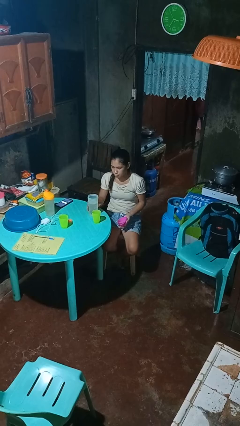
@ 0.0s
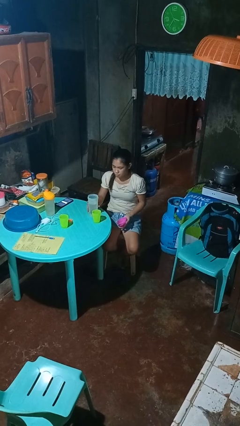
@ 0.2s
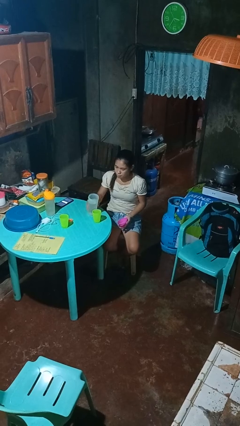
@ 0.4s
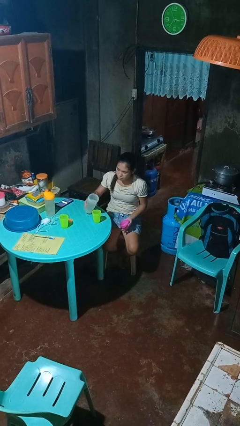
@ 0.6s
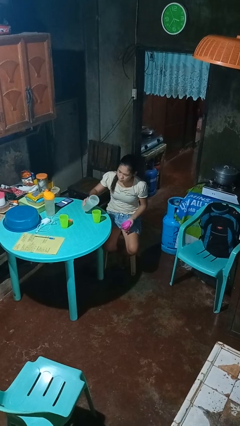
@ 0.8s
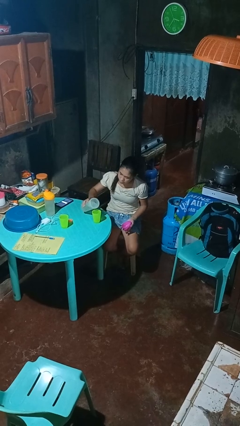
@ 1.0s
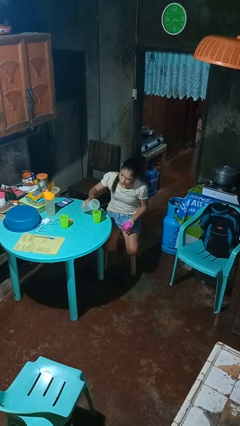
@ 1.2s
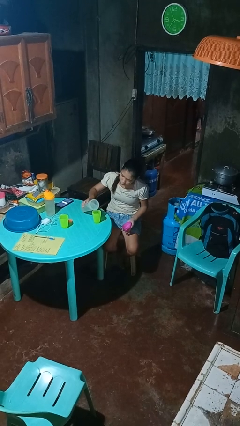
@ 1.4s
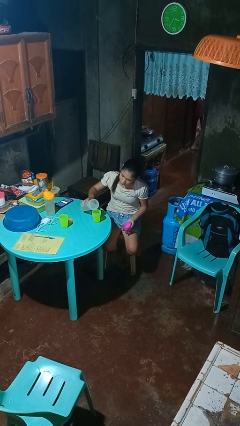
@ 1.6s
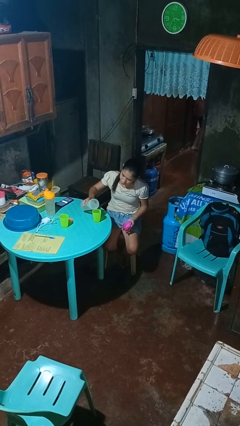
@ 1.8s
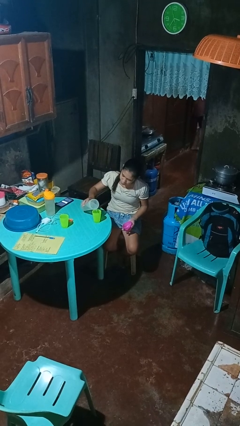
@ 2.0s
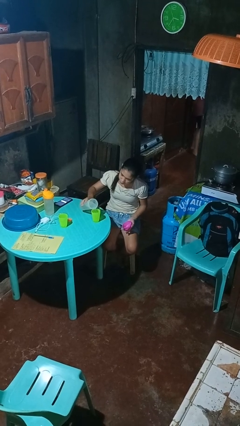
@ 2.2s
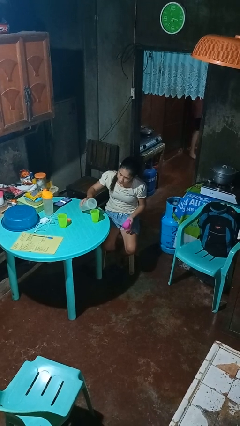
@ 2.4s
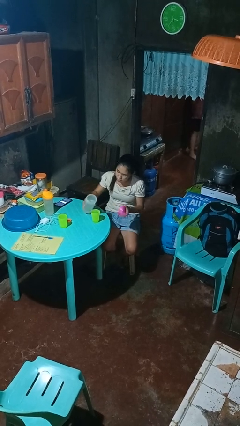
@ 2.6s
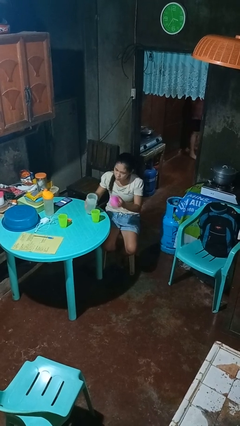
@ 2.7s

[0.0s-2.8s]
person pours liquid into cup

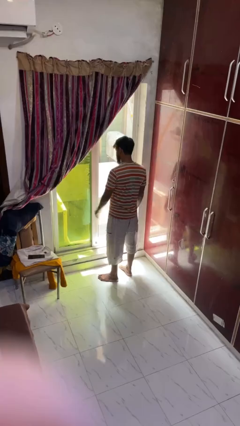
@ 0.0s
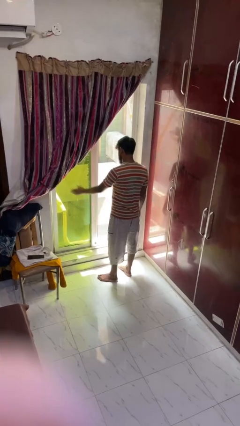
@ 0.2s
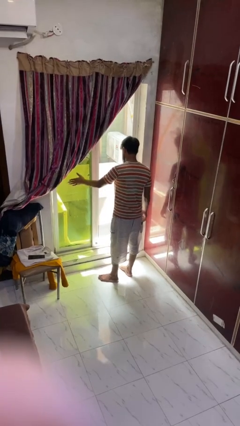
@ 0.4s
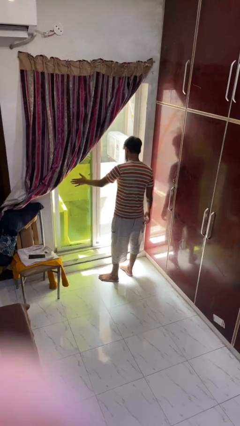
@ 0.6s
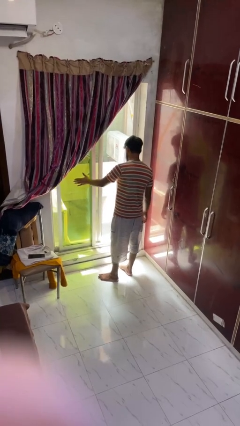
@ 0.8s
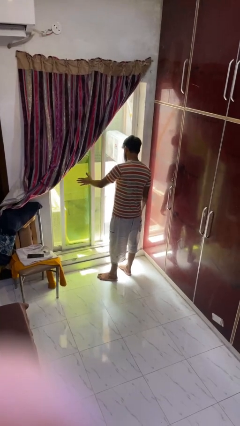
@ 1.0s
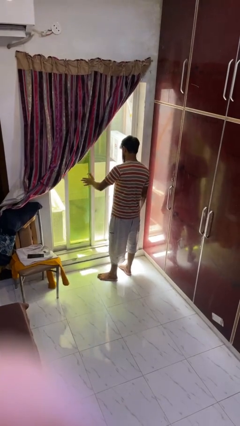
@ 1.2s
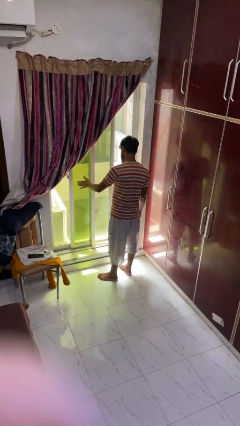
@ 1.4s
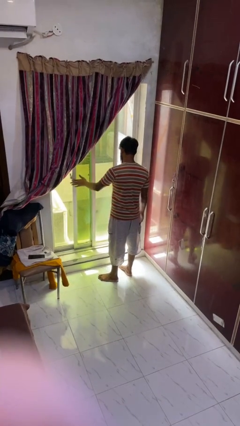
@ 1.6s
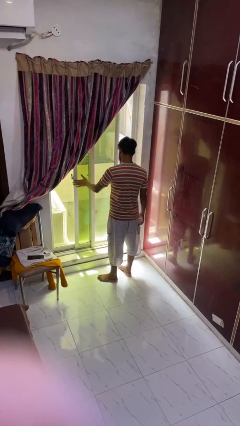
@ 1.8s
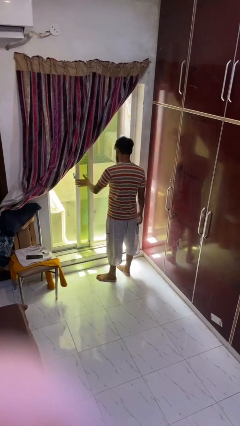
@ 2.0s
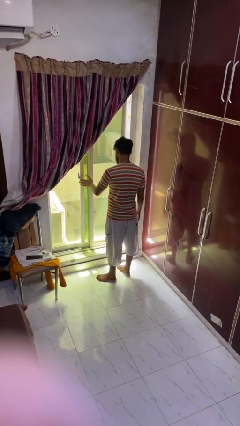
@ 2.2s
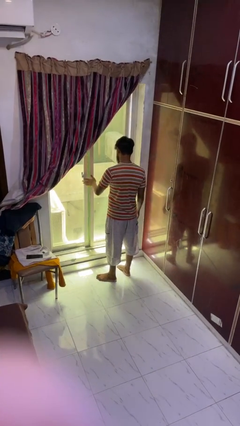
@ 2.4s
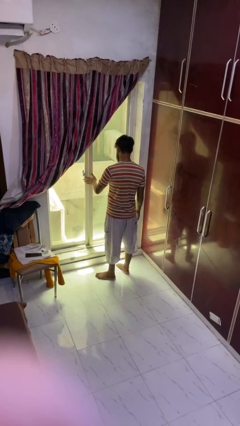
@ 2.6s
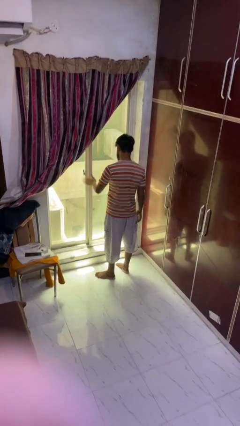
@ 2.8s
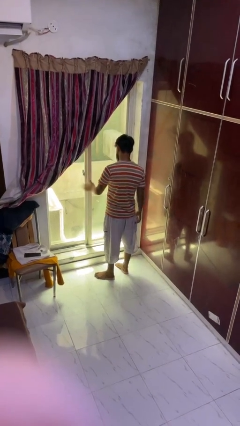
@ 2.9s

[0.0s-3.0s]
person closes home window

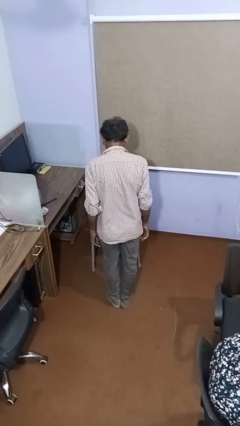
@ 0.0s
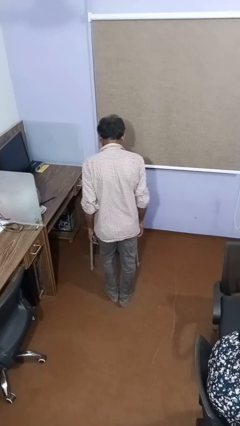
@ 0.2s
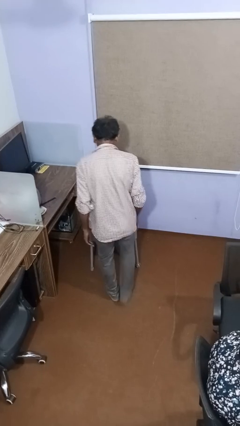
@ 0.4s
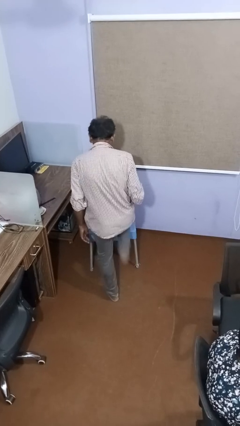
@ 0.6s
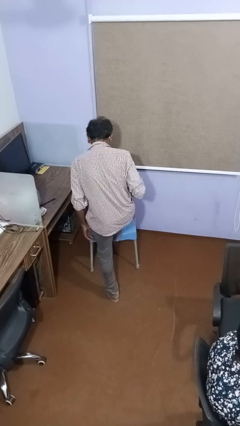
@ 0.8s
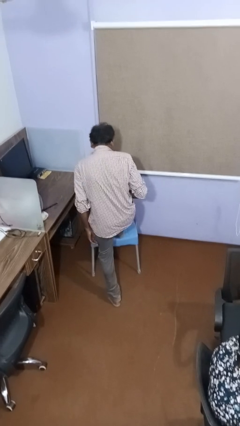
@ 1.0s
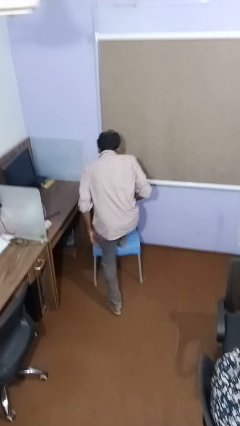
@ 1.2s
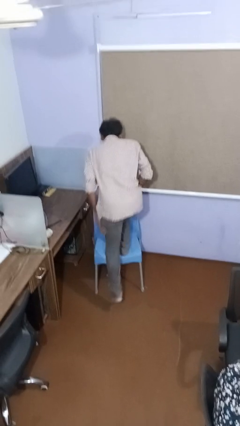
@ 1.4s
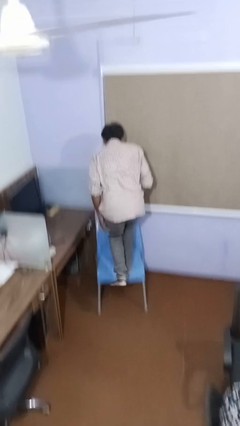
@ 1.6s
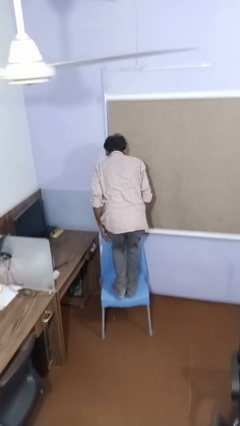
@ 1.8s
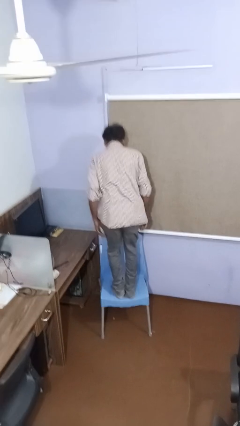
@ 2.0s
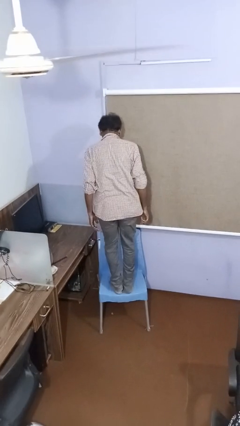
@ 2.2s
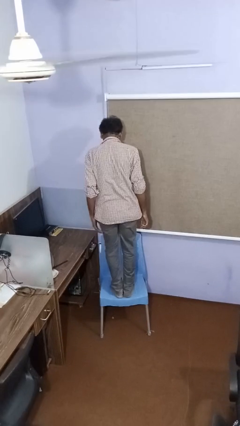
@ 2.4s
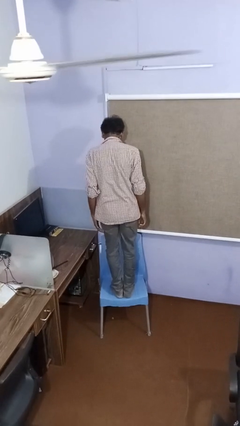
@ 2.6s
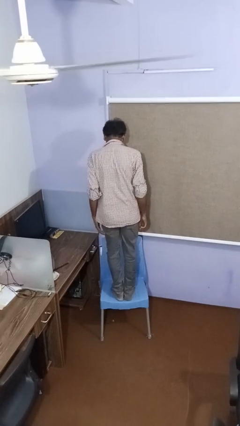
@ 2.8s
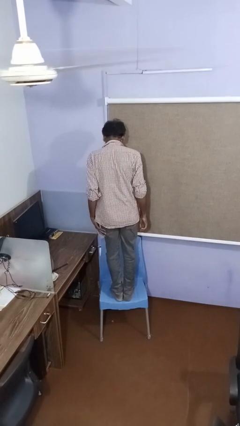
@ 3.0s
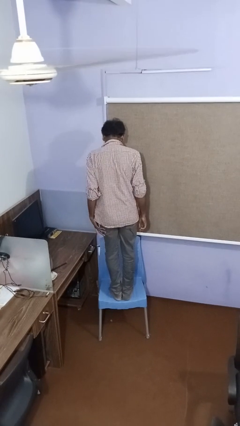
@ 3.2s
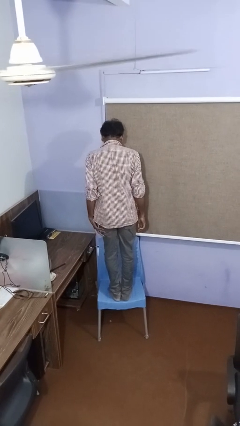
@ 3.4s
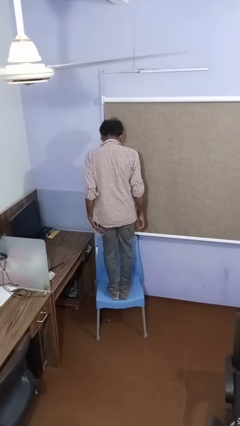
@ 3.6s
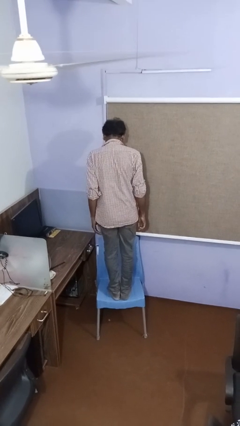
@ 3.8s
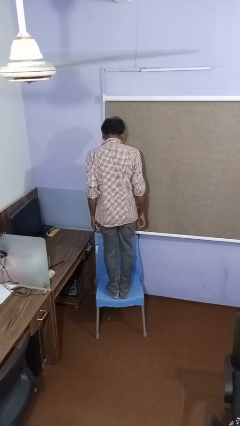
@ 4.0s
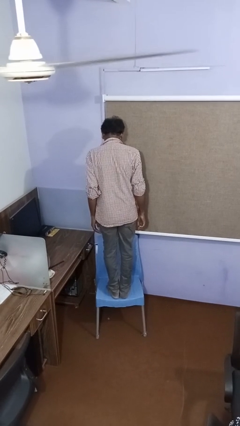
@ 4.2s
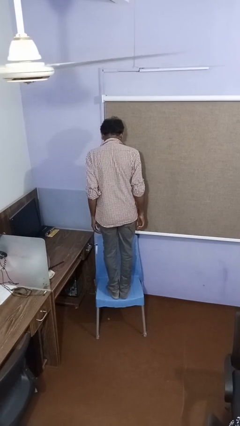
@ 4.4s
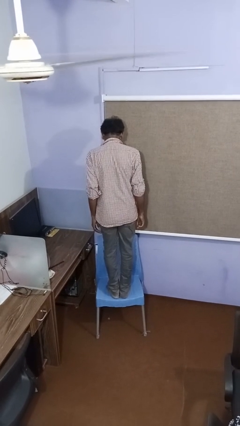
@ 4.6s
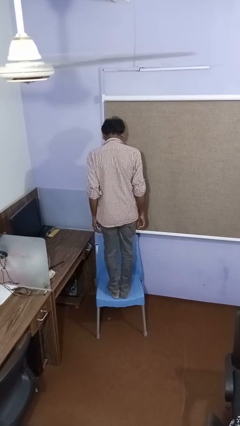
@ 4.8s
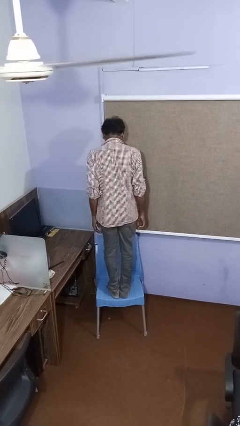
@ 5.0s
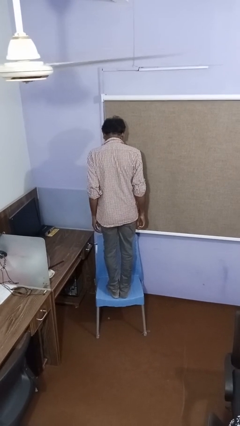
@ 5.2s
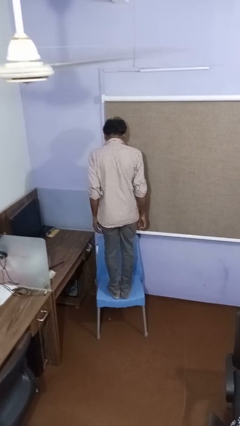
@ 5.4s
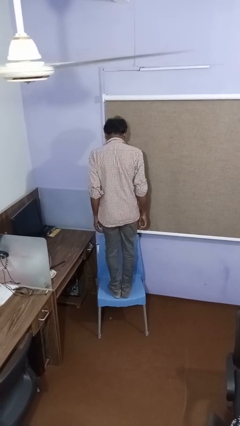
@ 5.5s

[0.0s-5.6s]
person climbs on chair

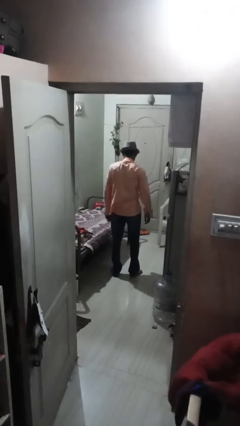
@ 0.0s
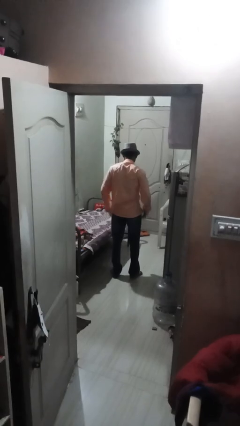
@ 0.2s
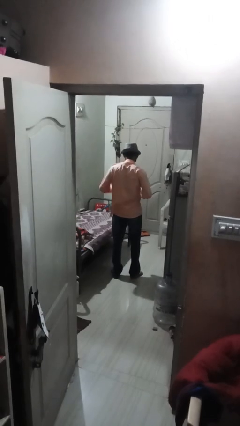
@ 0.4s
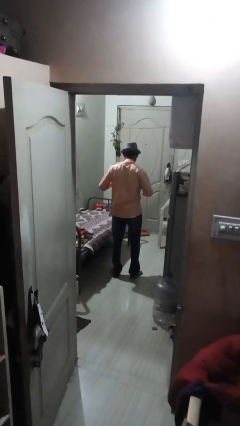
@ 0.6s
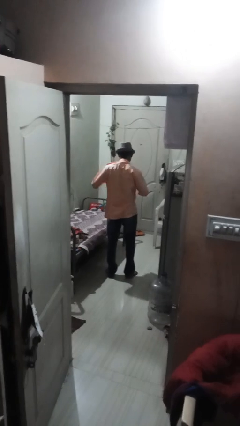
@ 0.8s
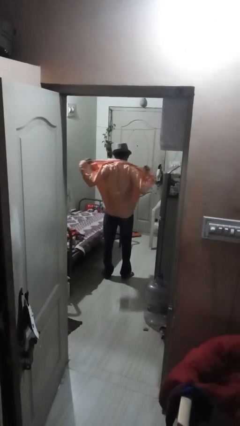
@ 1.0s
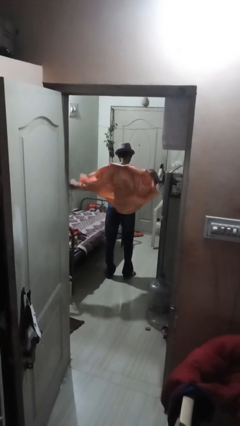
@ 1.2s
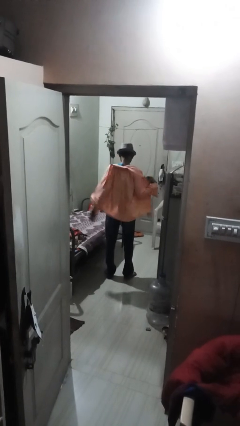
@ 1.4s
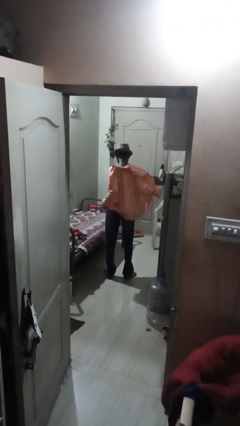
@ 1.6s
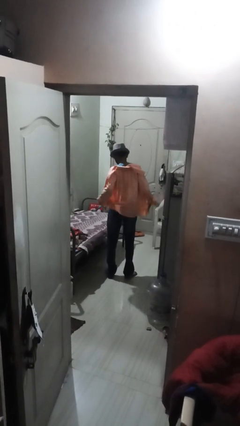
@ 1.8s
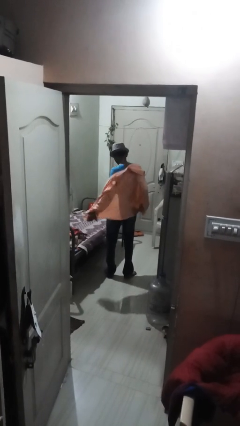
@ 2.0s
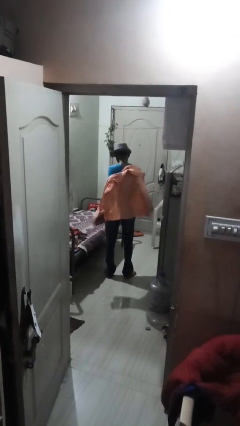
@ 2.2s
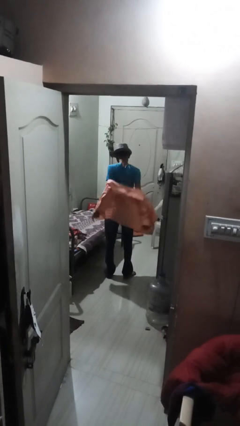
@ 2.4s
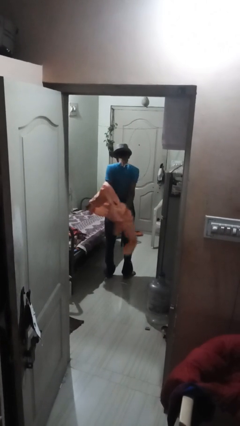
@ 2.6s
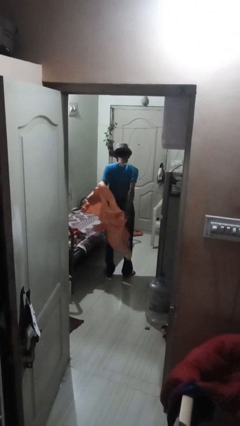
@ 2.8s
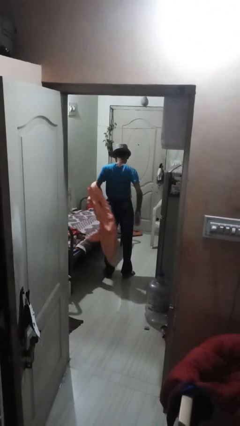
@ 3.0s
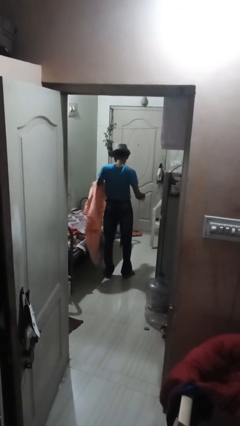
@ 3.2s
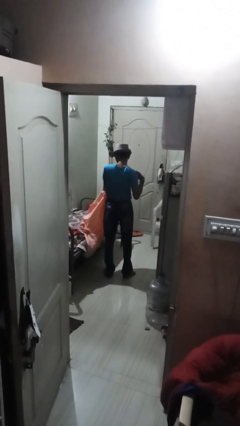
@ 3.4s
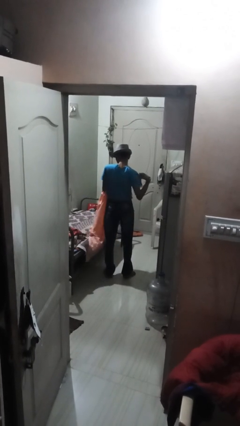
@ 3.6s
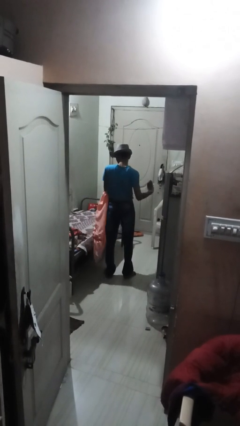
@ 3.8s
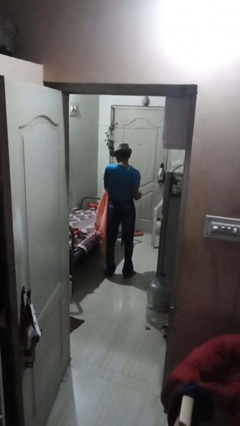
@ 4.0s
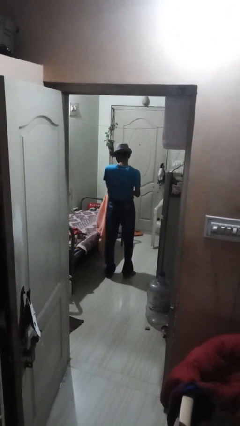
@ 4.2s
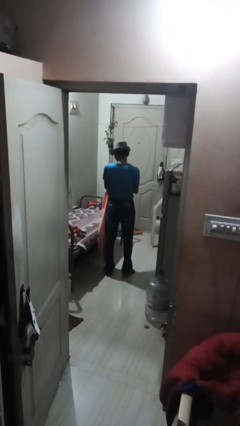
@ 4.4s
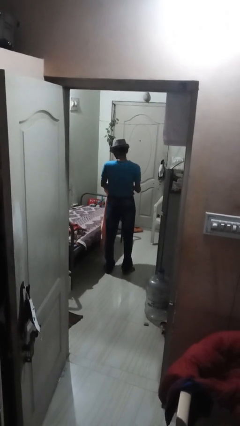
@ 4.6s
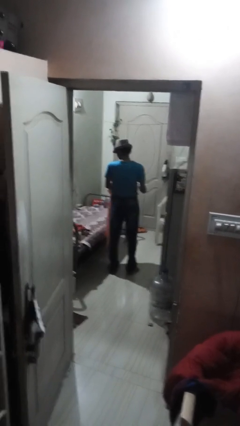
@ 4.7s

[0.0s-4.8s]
person takes off shirt

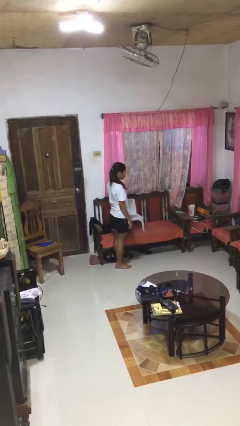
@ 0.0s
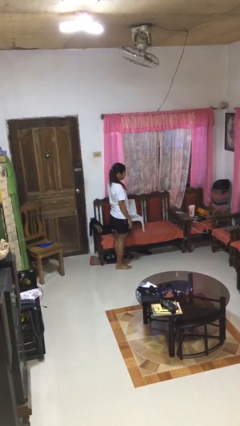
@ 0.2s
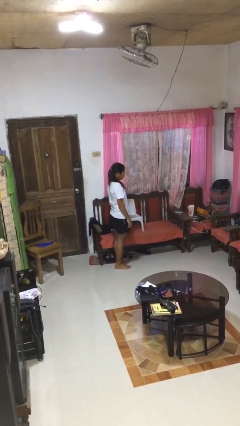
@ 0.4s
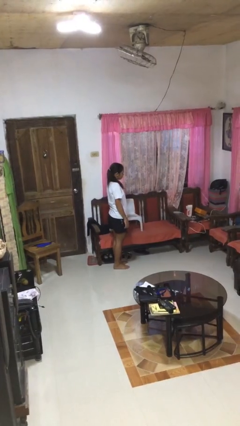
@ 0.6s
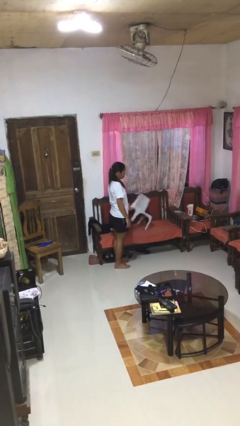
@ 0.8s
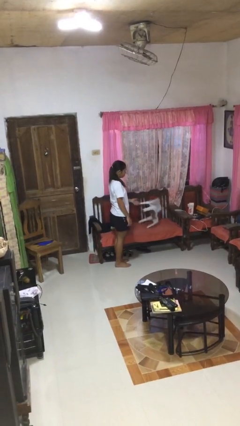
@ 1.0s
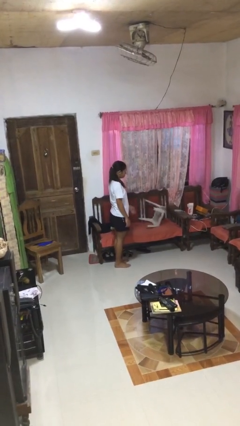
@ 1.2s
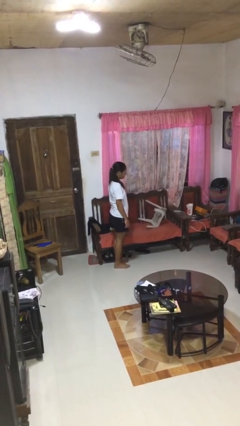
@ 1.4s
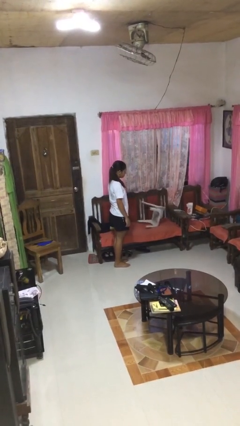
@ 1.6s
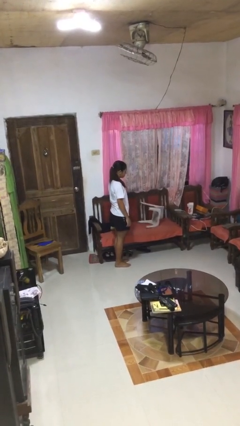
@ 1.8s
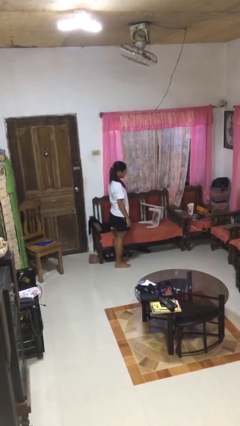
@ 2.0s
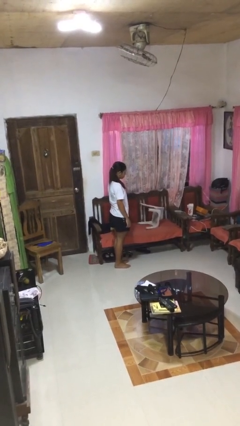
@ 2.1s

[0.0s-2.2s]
person knocks over furniture
